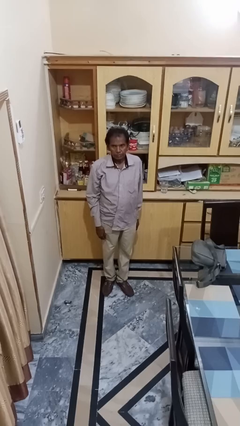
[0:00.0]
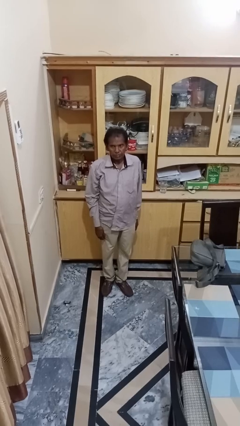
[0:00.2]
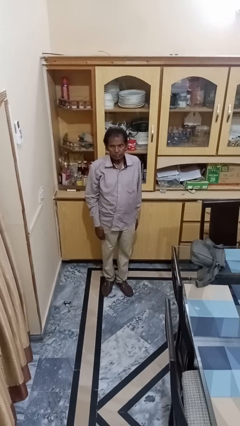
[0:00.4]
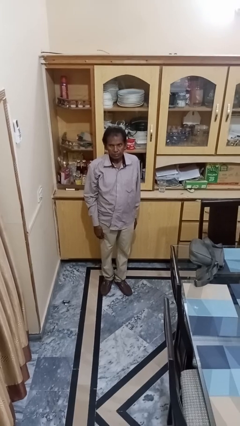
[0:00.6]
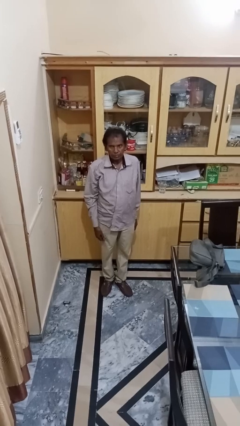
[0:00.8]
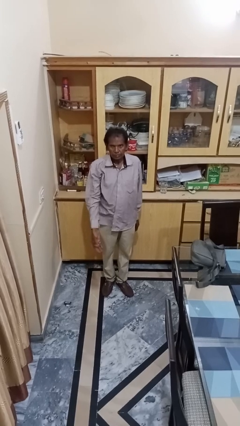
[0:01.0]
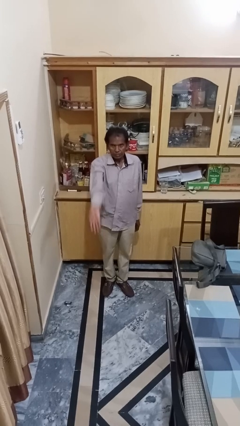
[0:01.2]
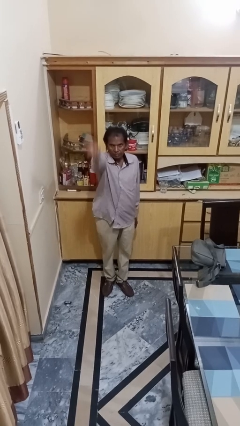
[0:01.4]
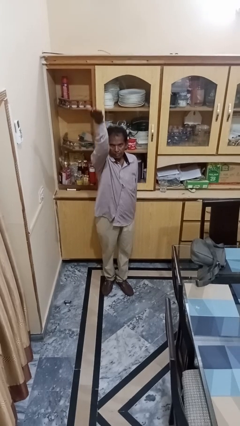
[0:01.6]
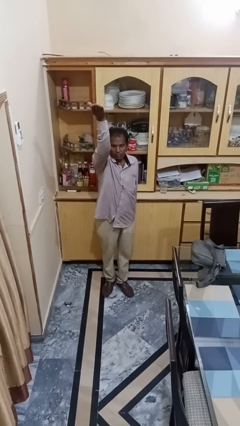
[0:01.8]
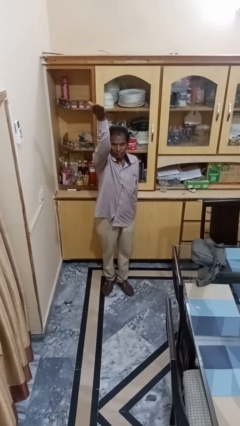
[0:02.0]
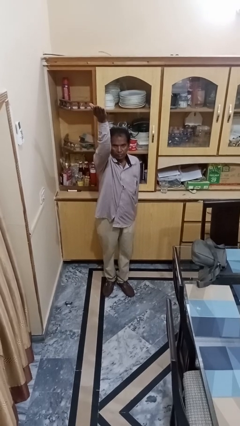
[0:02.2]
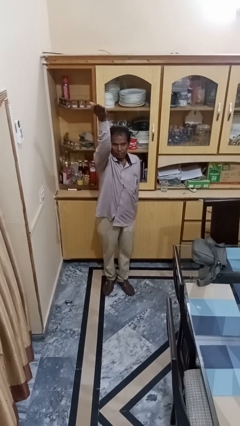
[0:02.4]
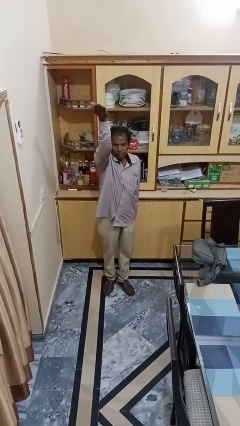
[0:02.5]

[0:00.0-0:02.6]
person gestures swipe up

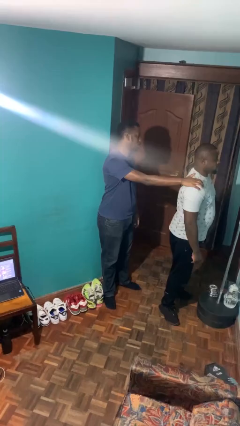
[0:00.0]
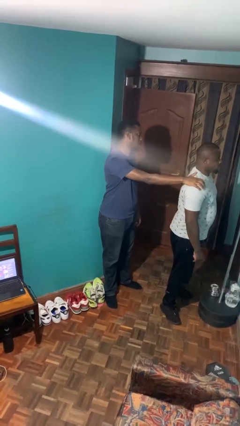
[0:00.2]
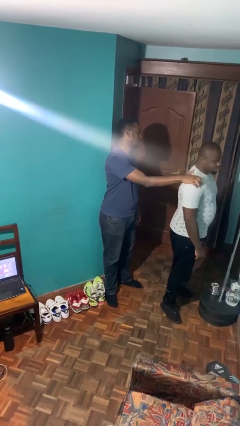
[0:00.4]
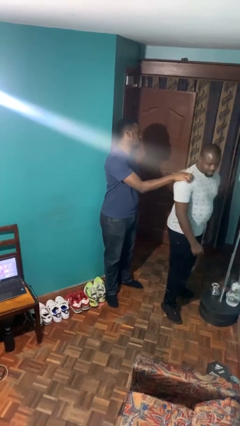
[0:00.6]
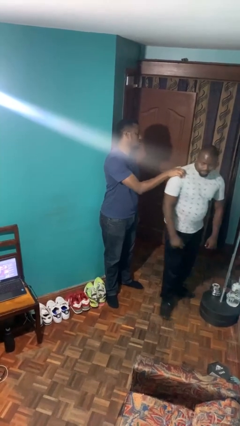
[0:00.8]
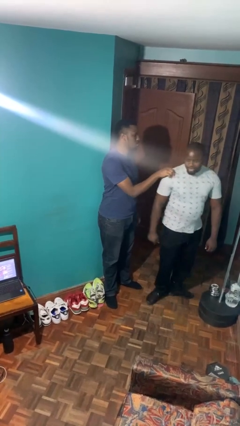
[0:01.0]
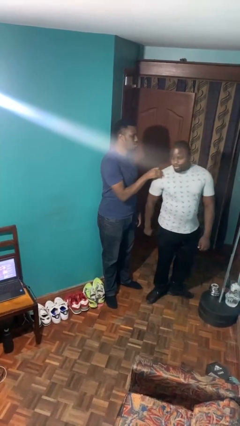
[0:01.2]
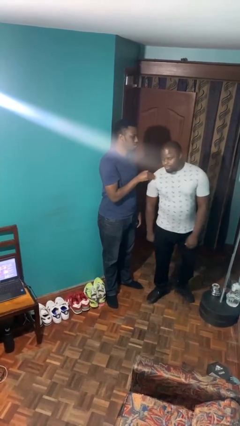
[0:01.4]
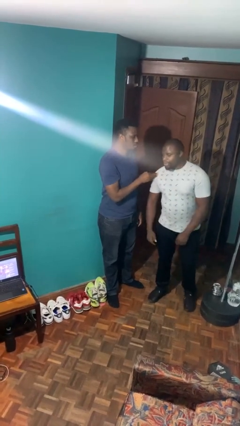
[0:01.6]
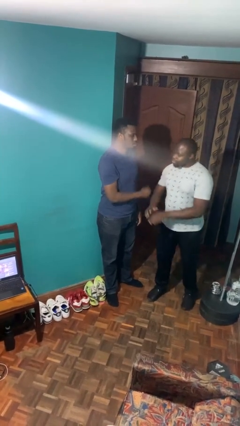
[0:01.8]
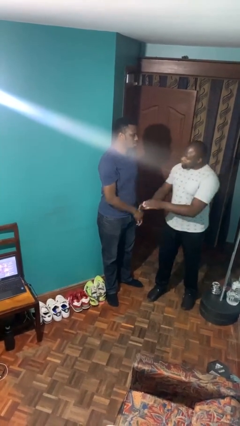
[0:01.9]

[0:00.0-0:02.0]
person spins person around

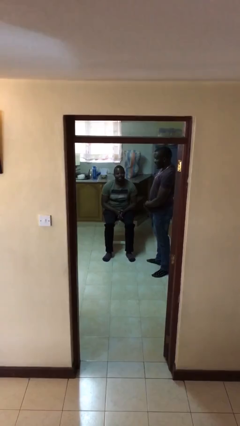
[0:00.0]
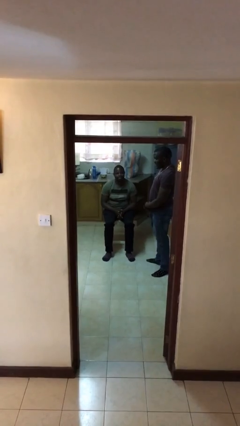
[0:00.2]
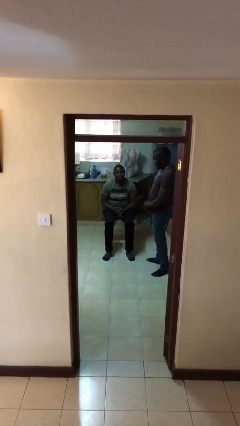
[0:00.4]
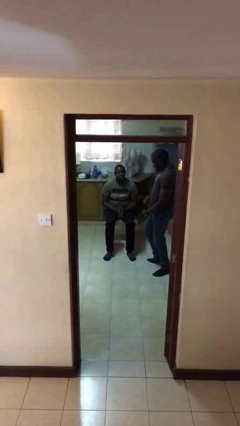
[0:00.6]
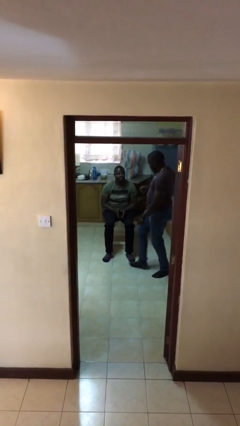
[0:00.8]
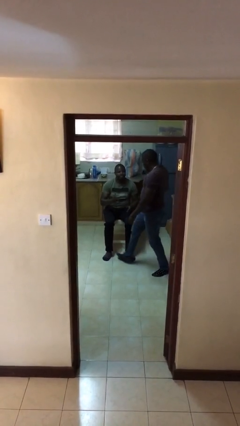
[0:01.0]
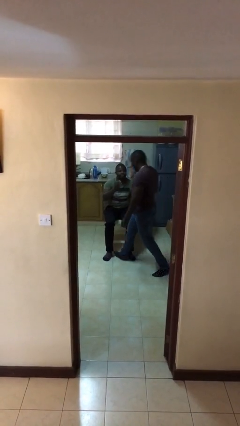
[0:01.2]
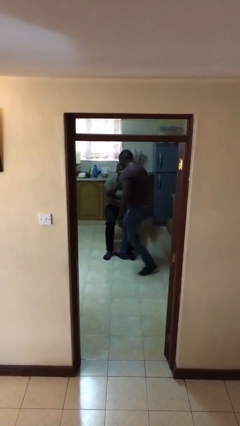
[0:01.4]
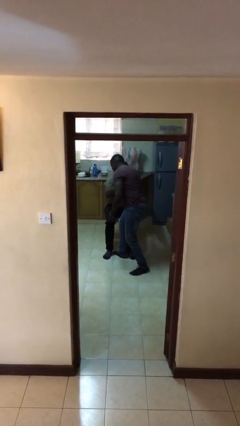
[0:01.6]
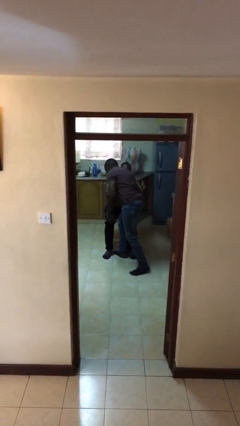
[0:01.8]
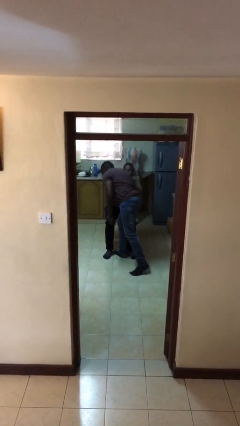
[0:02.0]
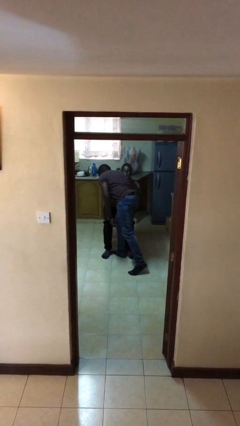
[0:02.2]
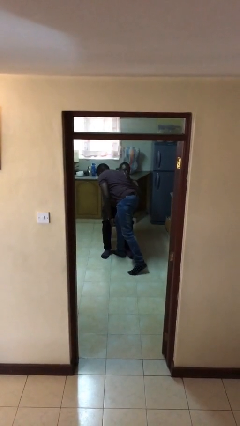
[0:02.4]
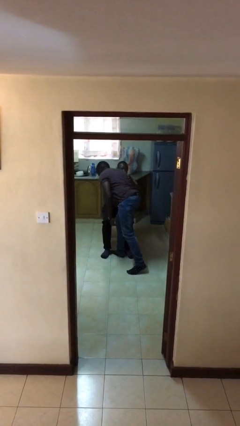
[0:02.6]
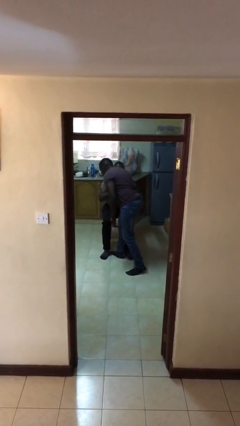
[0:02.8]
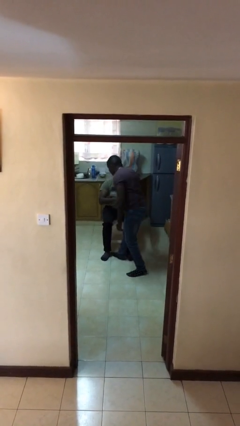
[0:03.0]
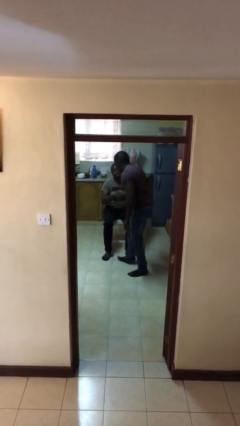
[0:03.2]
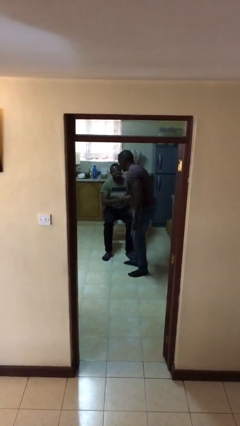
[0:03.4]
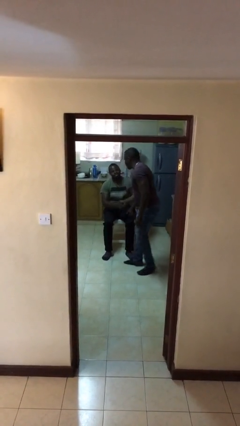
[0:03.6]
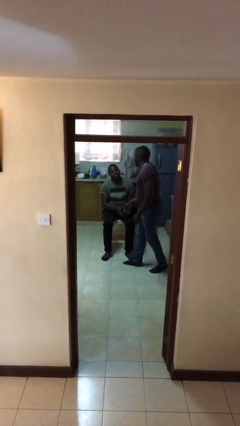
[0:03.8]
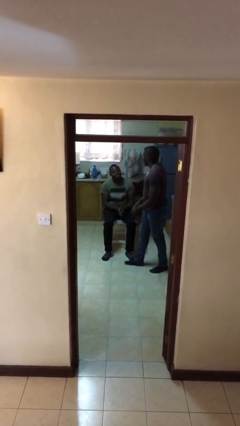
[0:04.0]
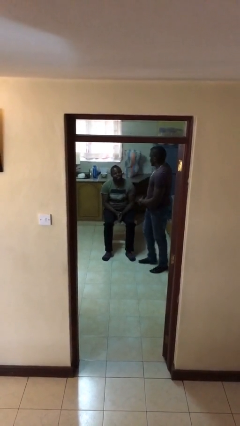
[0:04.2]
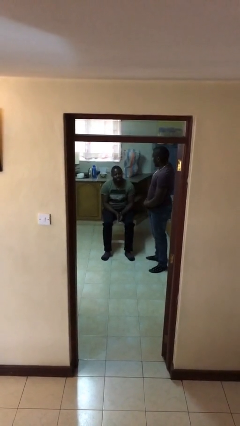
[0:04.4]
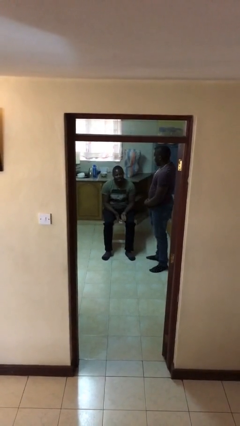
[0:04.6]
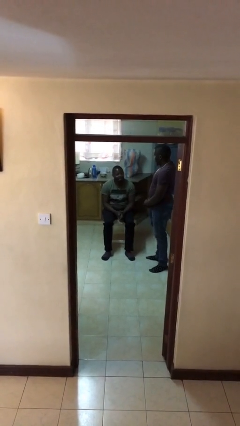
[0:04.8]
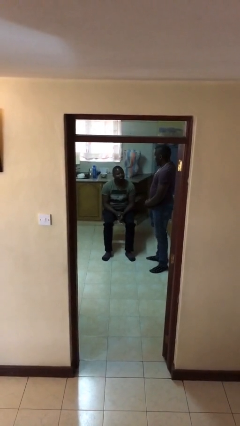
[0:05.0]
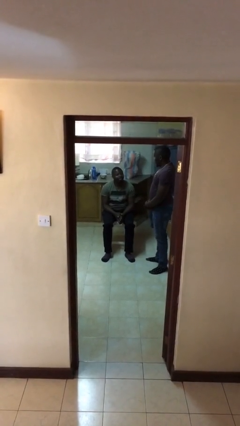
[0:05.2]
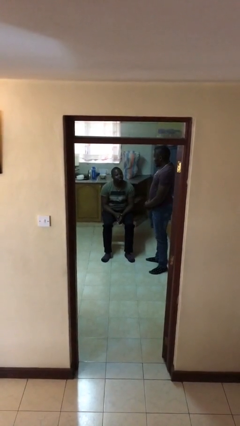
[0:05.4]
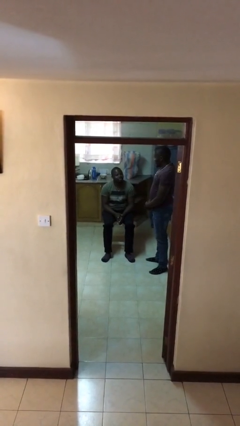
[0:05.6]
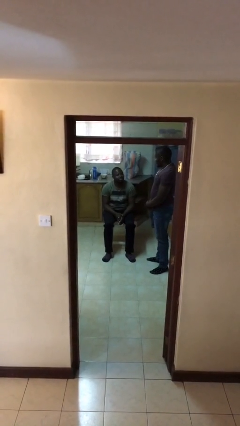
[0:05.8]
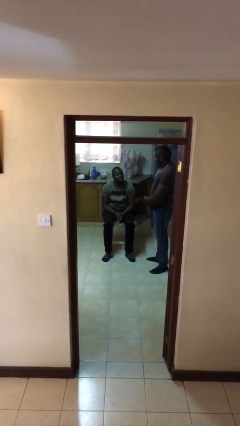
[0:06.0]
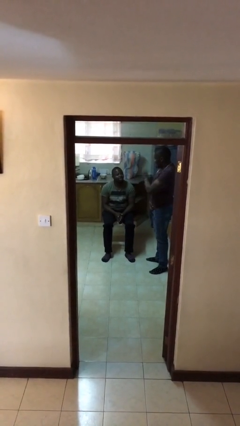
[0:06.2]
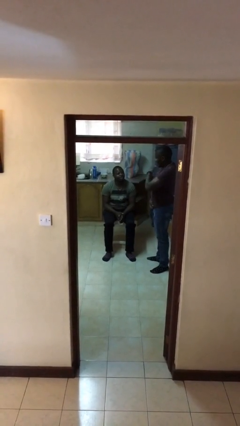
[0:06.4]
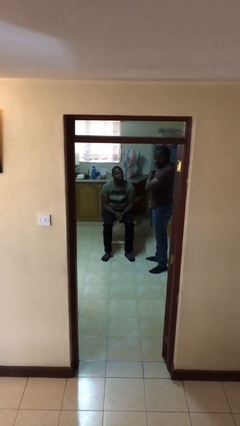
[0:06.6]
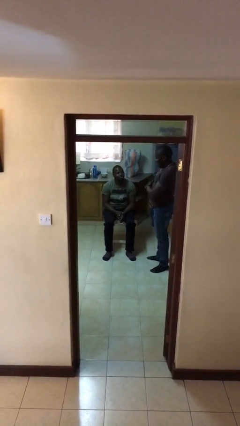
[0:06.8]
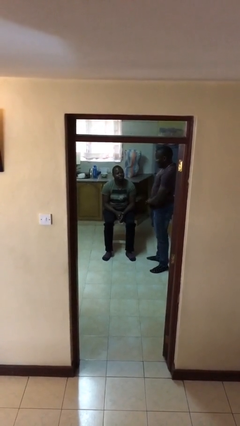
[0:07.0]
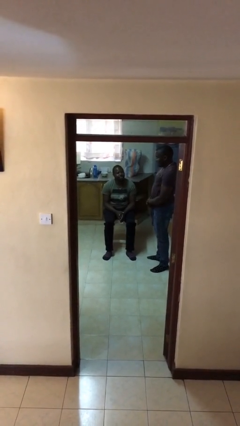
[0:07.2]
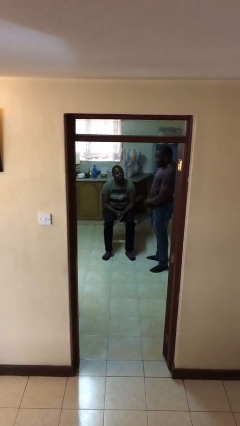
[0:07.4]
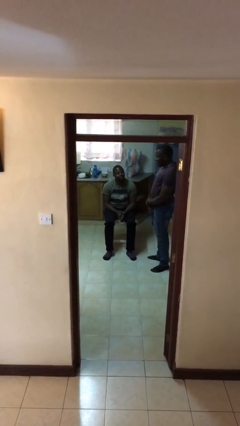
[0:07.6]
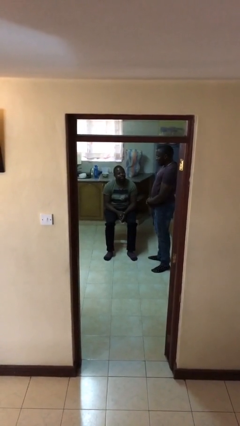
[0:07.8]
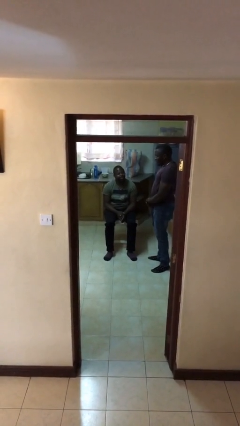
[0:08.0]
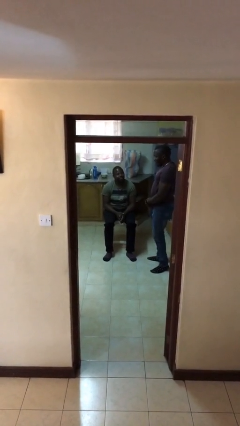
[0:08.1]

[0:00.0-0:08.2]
person embraces person

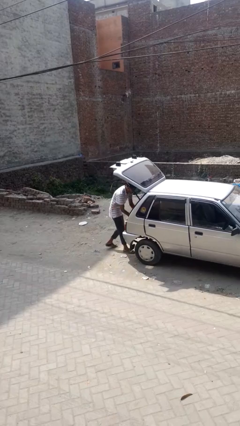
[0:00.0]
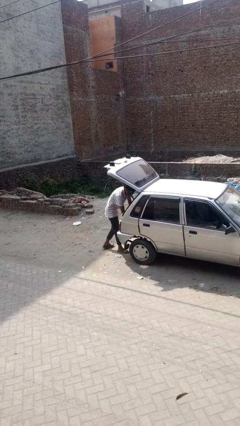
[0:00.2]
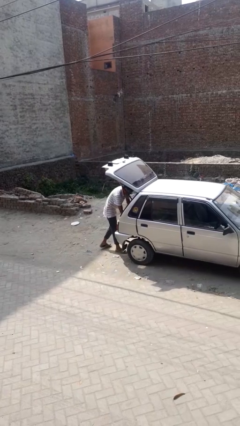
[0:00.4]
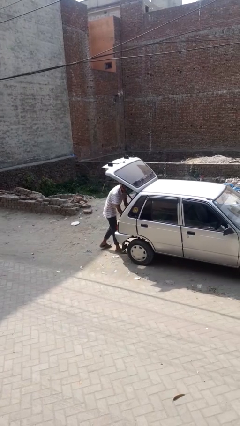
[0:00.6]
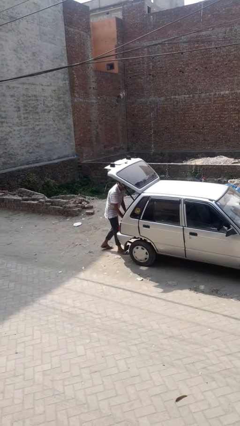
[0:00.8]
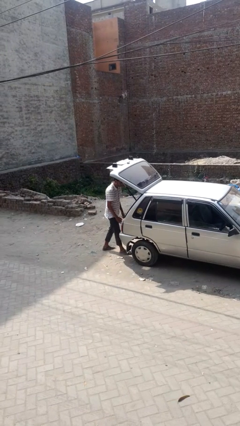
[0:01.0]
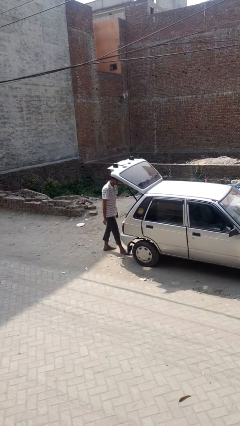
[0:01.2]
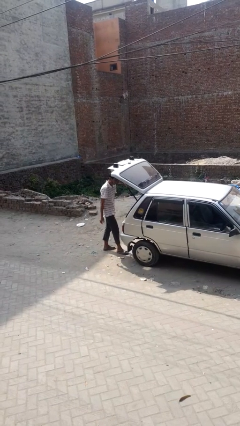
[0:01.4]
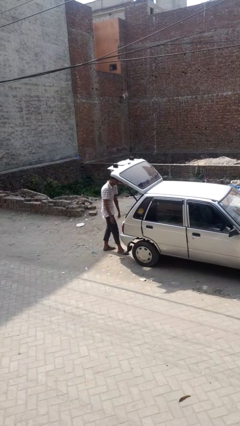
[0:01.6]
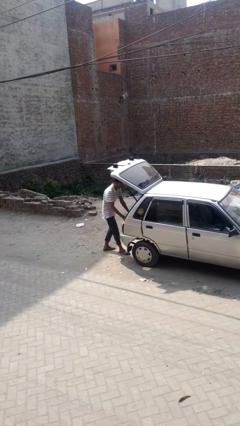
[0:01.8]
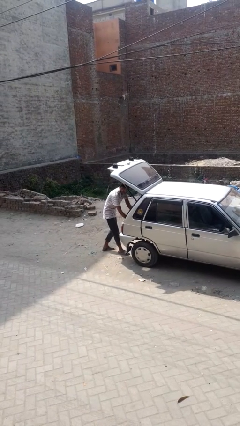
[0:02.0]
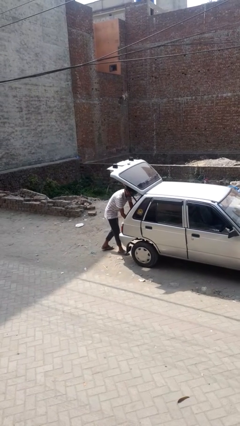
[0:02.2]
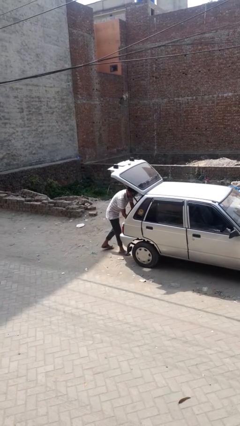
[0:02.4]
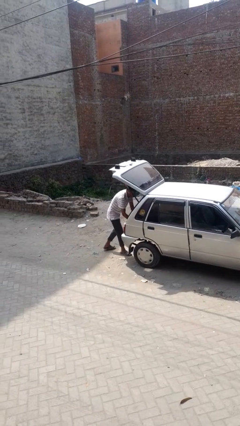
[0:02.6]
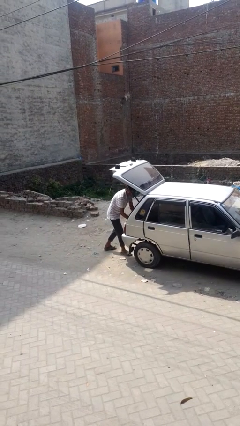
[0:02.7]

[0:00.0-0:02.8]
person loads car

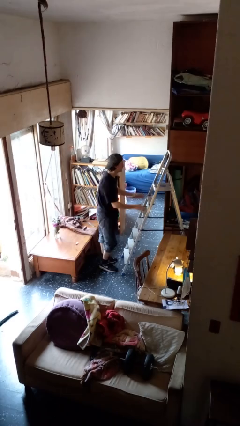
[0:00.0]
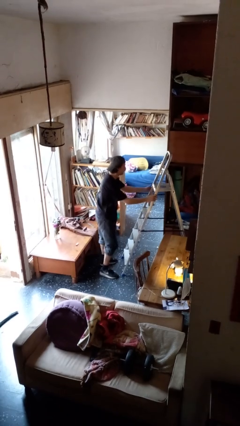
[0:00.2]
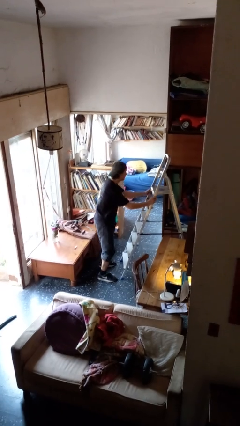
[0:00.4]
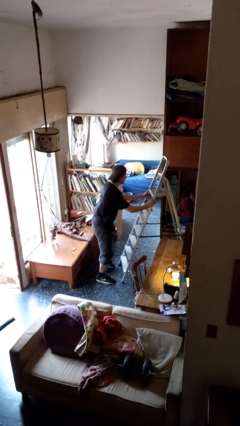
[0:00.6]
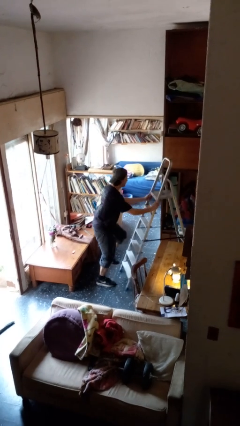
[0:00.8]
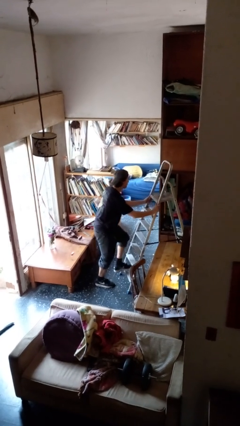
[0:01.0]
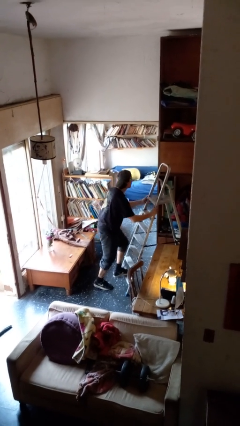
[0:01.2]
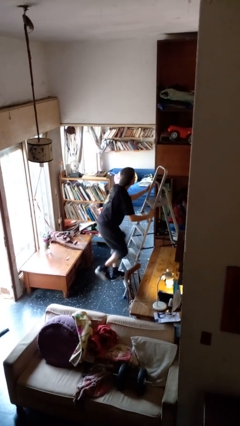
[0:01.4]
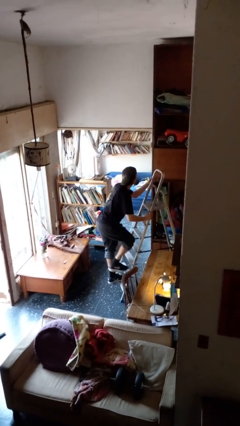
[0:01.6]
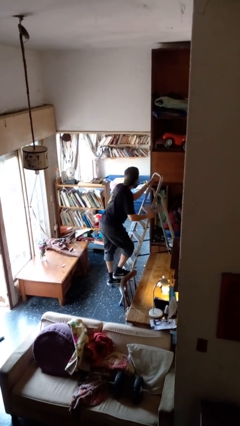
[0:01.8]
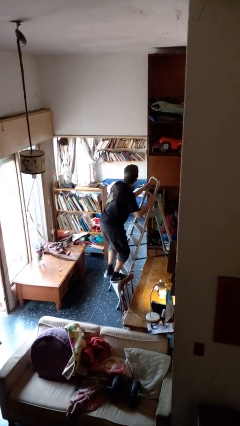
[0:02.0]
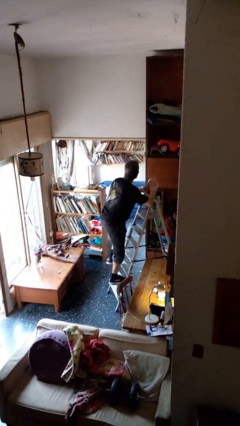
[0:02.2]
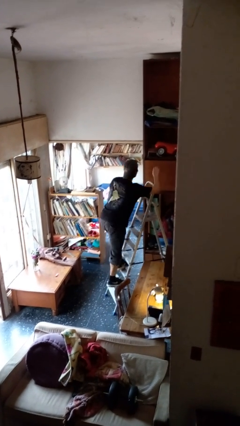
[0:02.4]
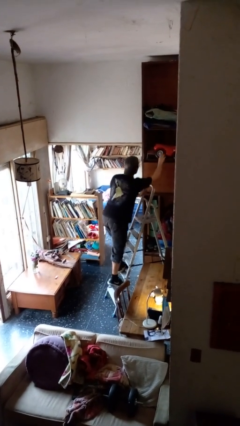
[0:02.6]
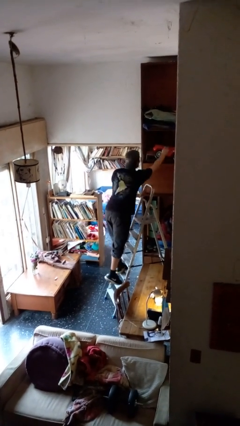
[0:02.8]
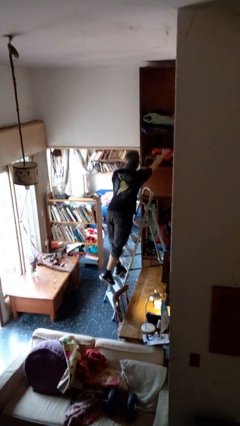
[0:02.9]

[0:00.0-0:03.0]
person climbs up ladder
